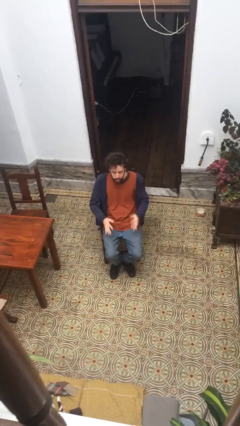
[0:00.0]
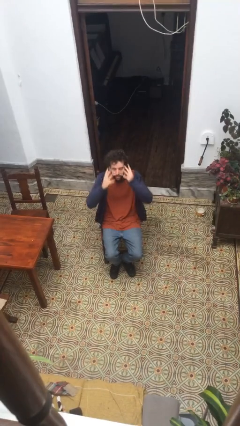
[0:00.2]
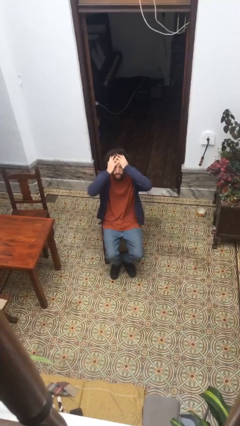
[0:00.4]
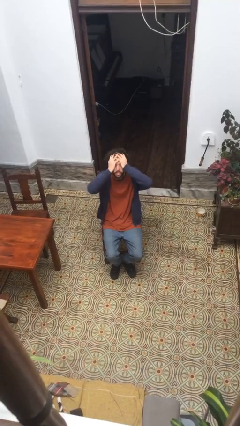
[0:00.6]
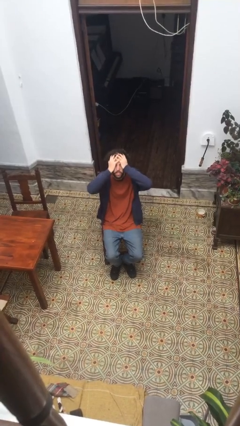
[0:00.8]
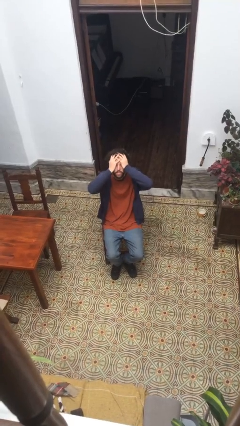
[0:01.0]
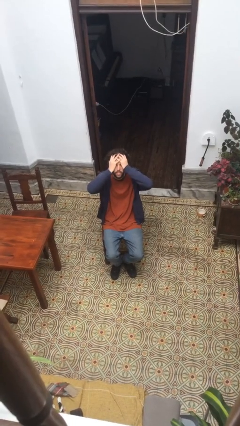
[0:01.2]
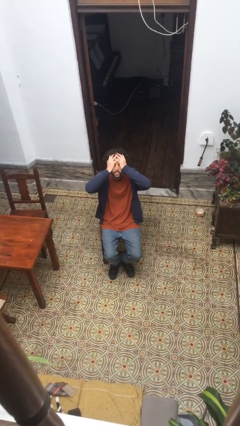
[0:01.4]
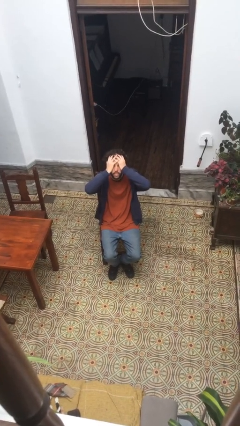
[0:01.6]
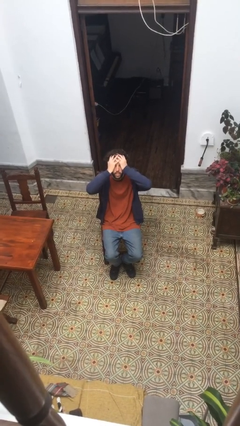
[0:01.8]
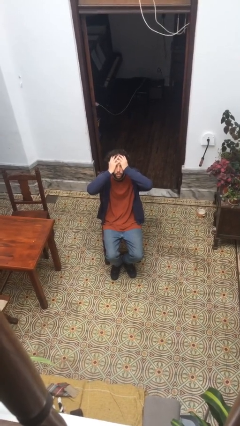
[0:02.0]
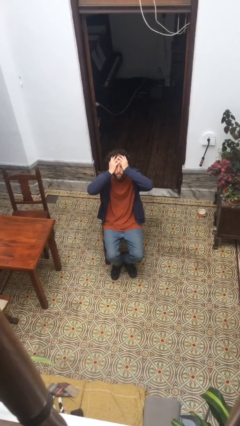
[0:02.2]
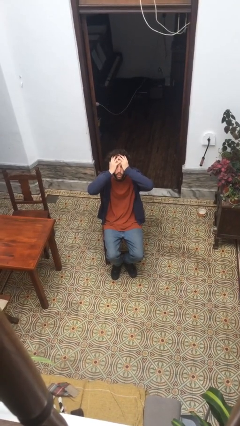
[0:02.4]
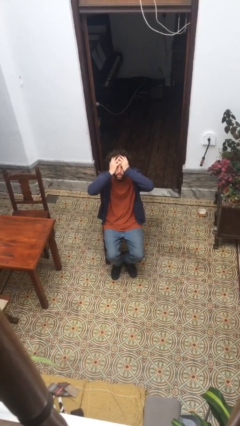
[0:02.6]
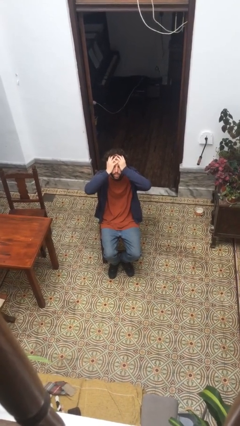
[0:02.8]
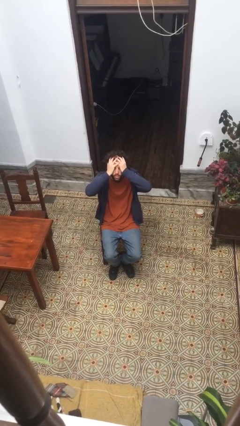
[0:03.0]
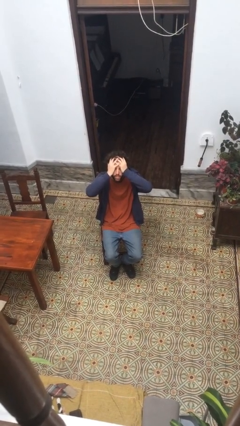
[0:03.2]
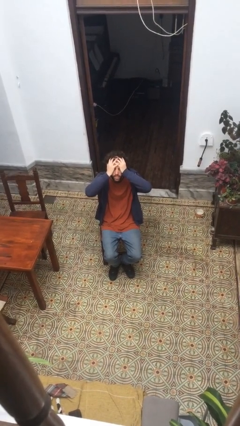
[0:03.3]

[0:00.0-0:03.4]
person covers face with hands

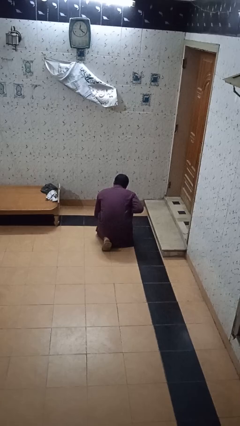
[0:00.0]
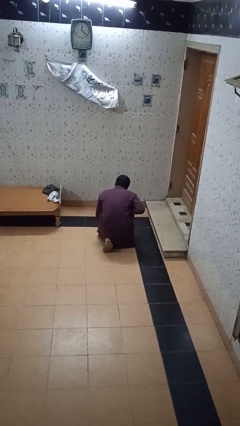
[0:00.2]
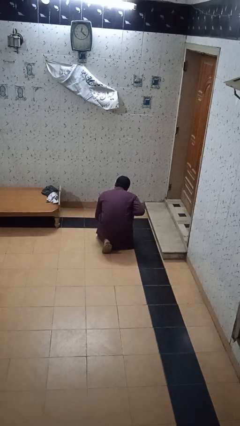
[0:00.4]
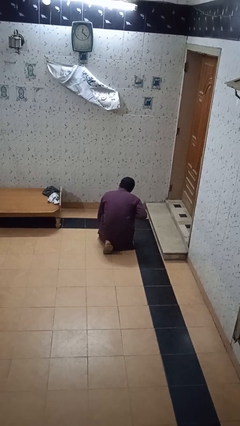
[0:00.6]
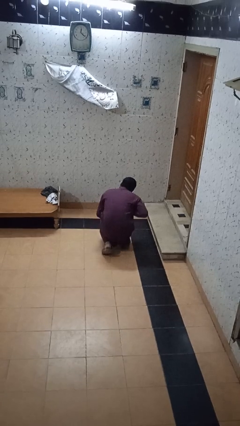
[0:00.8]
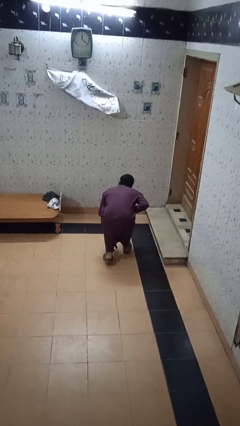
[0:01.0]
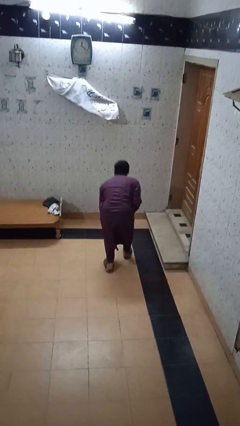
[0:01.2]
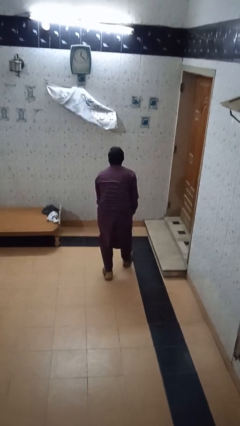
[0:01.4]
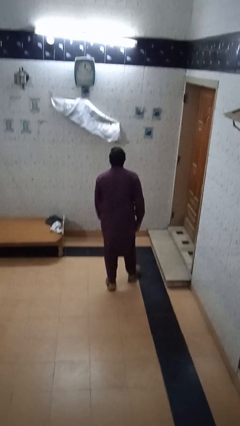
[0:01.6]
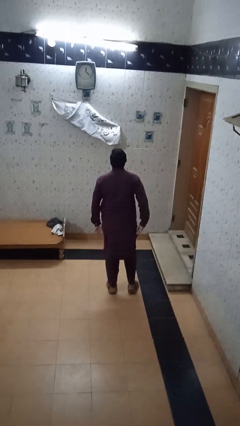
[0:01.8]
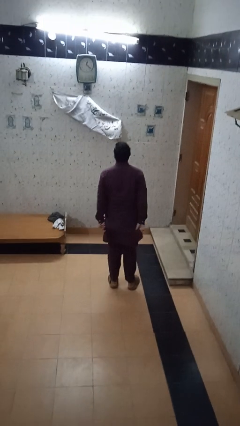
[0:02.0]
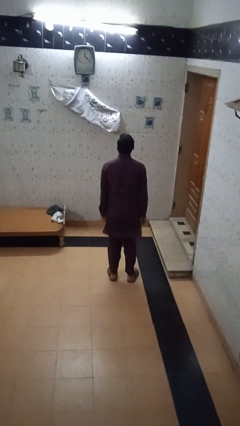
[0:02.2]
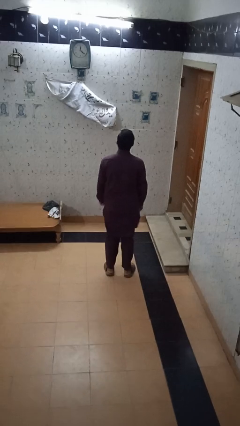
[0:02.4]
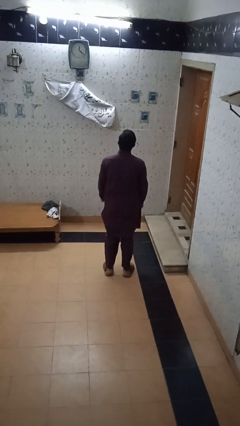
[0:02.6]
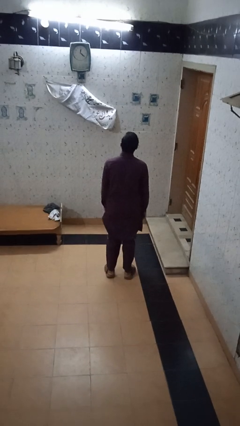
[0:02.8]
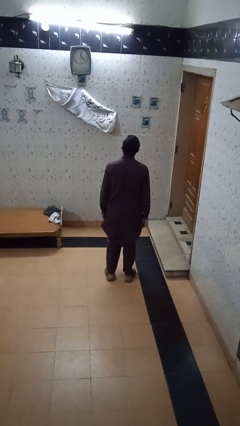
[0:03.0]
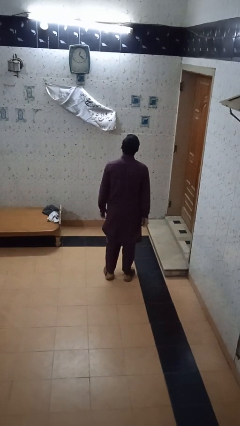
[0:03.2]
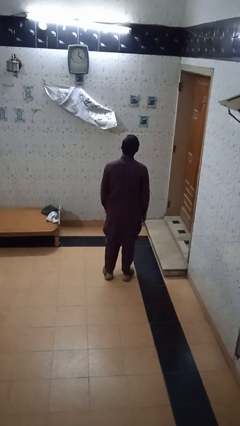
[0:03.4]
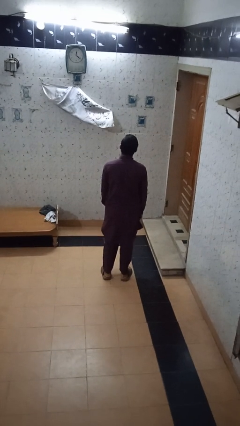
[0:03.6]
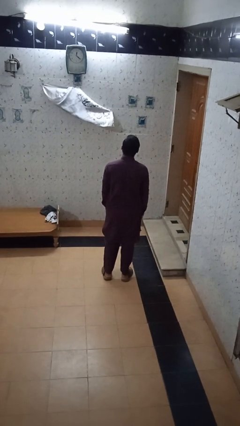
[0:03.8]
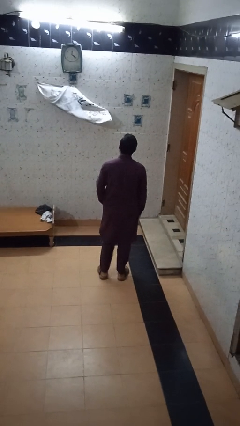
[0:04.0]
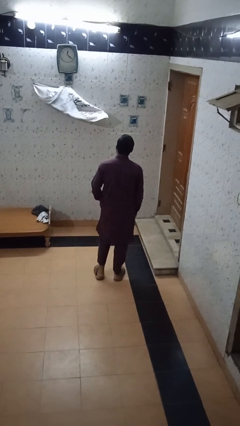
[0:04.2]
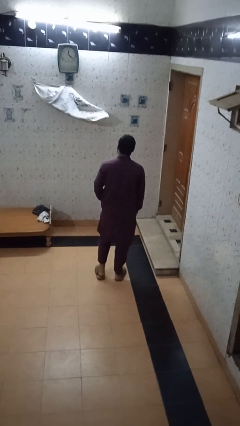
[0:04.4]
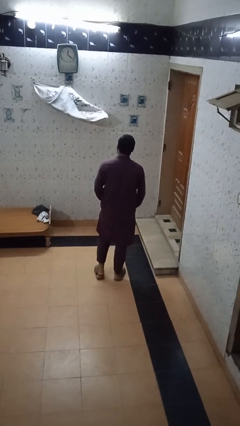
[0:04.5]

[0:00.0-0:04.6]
person stands up from floor

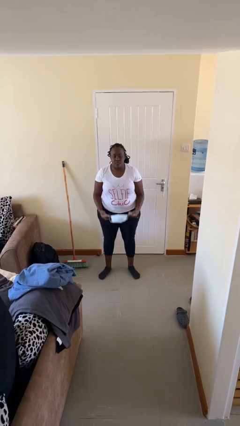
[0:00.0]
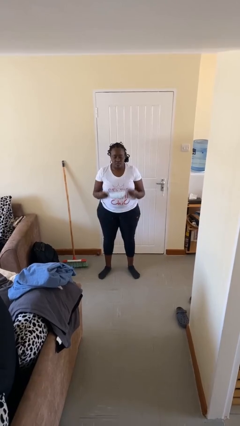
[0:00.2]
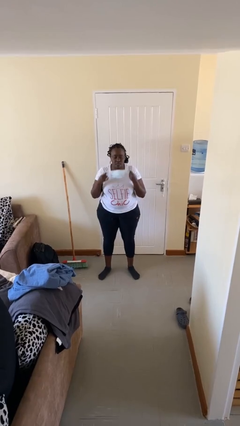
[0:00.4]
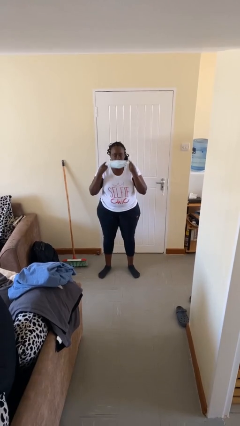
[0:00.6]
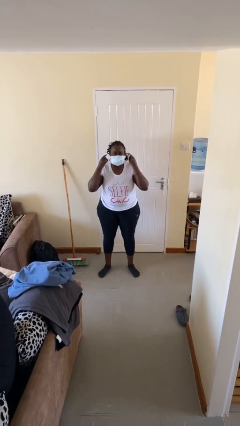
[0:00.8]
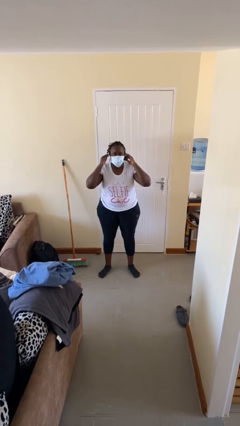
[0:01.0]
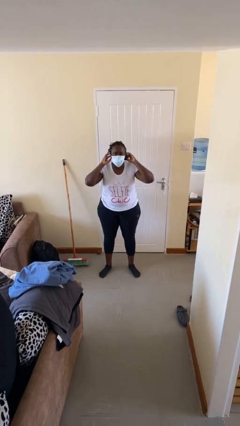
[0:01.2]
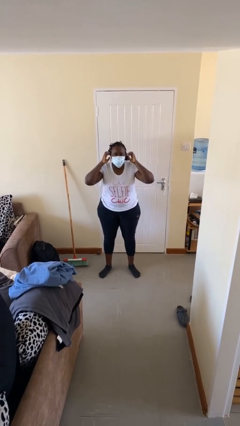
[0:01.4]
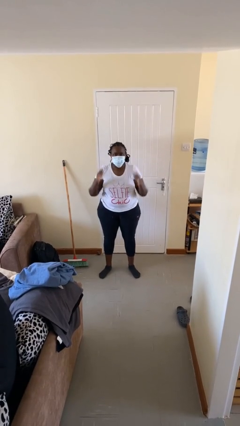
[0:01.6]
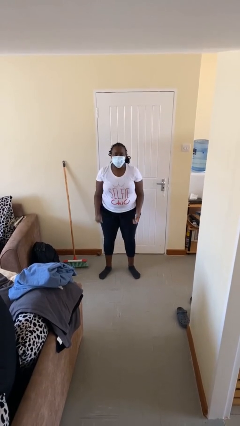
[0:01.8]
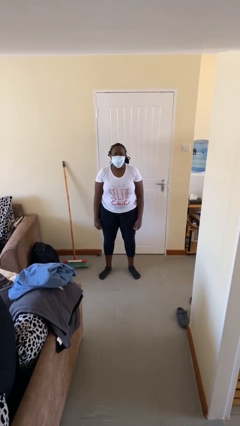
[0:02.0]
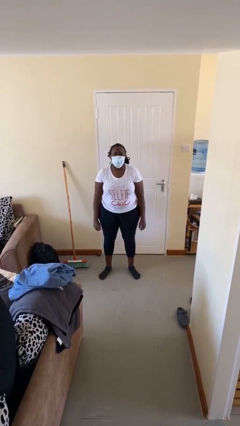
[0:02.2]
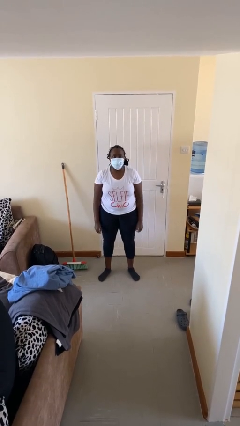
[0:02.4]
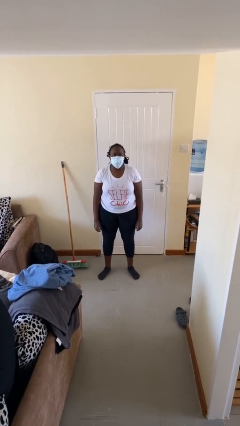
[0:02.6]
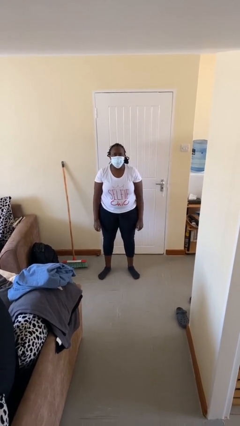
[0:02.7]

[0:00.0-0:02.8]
person puts on facemask

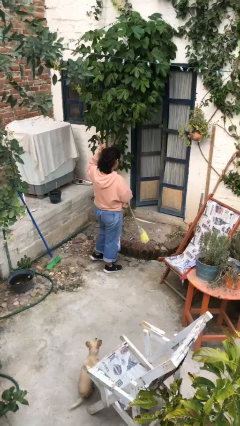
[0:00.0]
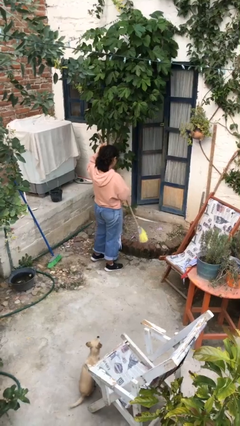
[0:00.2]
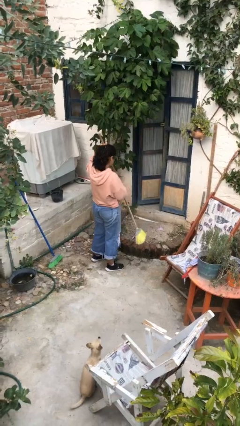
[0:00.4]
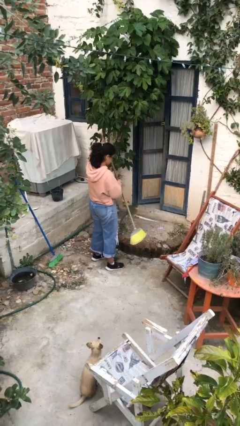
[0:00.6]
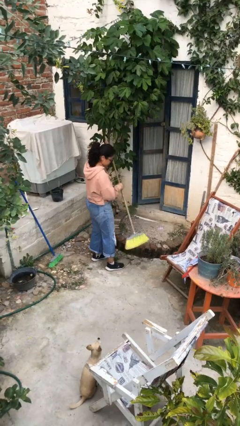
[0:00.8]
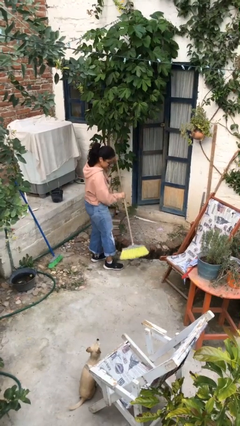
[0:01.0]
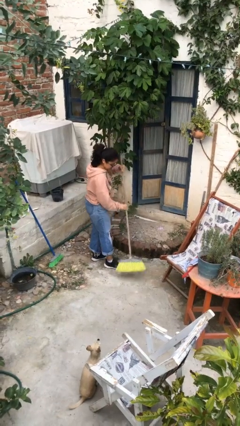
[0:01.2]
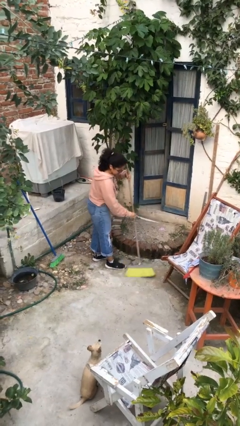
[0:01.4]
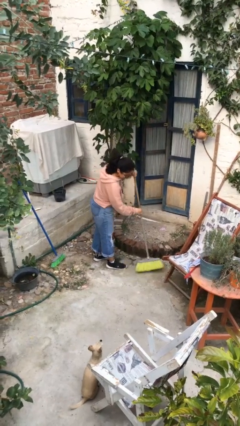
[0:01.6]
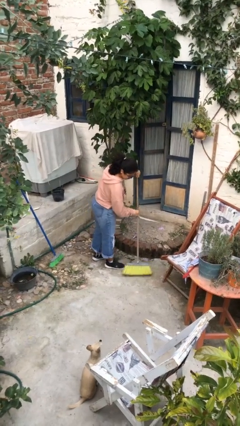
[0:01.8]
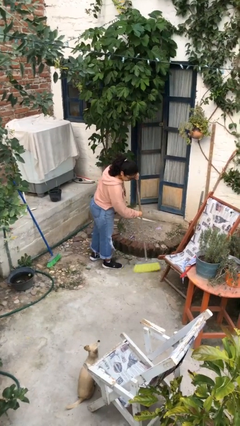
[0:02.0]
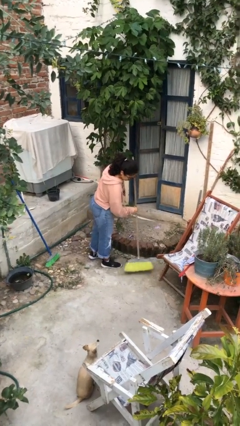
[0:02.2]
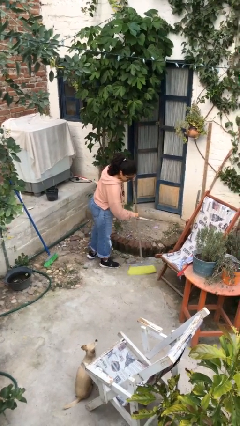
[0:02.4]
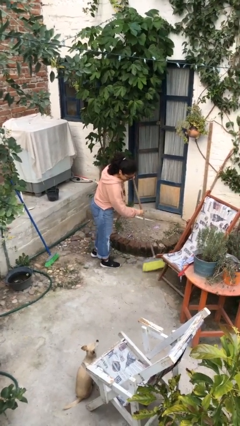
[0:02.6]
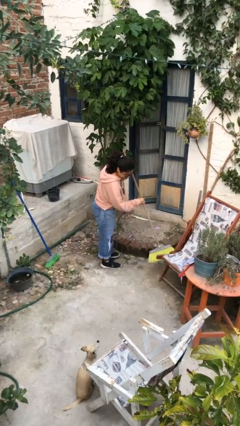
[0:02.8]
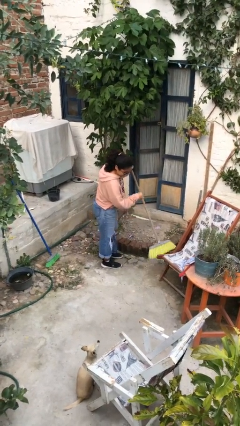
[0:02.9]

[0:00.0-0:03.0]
person sweeps floor

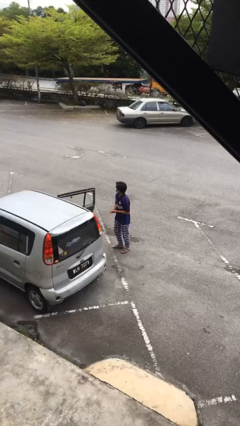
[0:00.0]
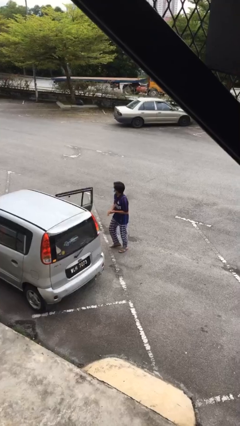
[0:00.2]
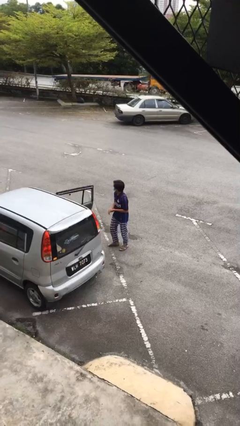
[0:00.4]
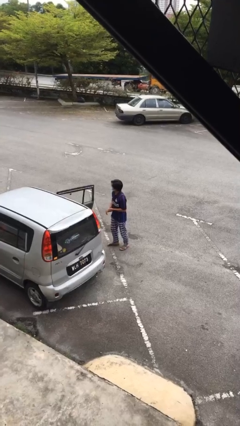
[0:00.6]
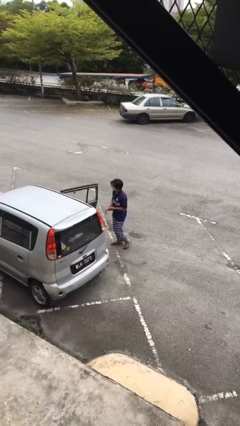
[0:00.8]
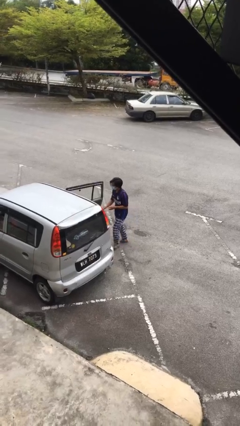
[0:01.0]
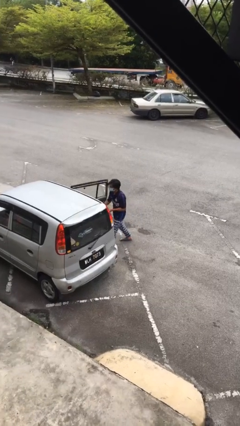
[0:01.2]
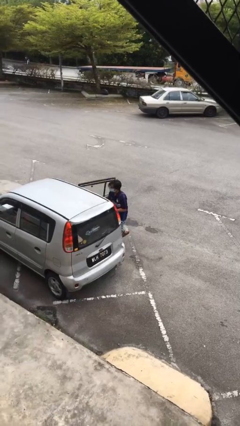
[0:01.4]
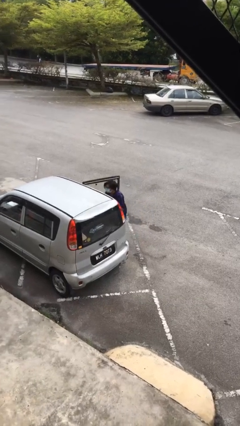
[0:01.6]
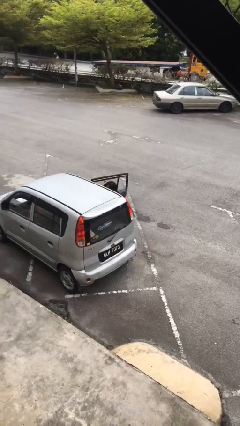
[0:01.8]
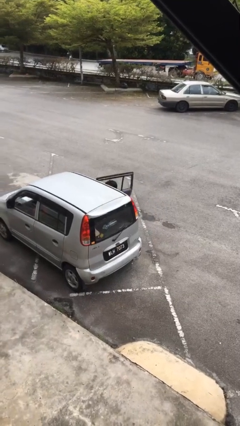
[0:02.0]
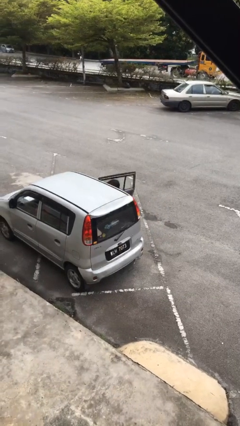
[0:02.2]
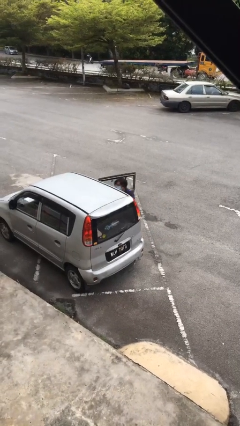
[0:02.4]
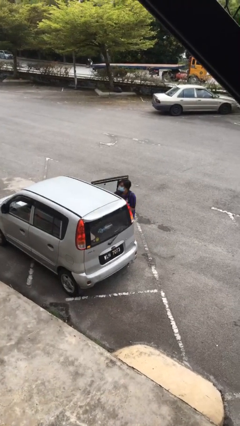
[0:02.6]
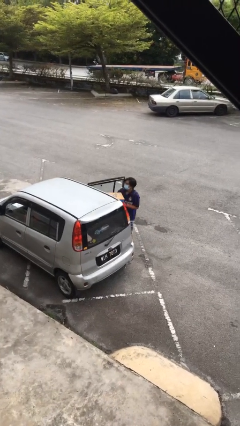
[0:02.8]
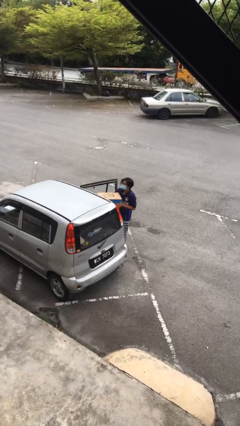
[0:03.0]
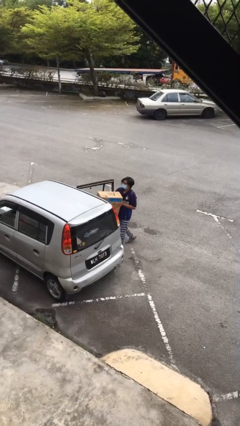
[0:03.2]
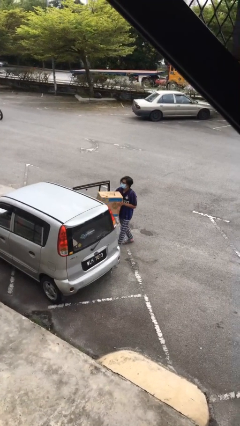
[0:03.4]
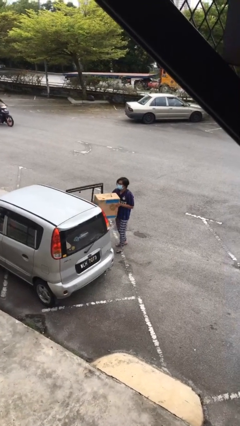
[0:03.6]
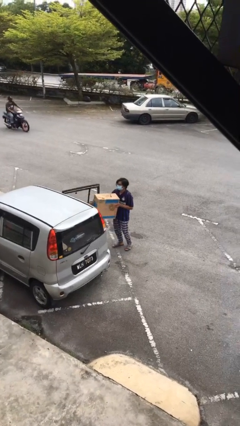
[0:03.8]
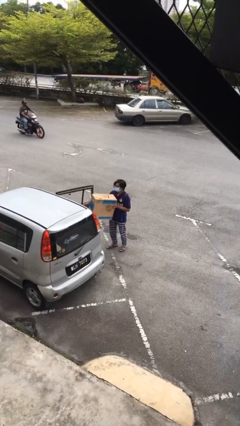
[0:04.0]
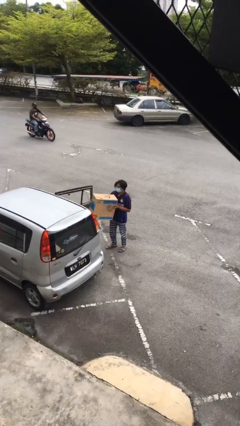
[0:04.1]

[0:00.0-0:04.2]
person unloads car
